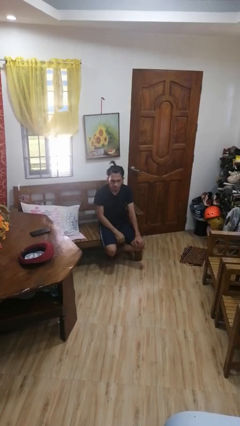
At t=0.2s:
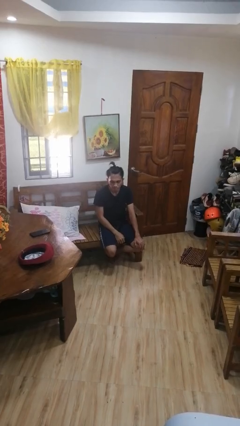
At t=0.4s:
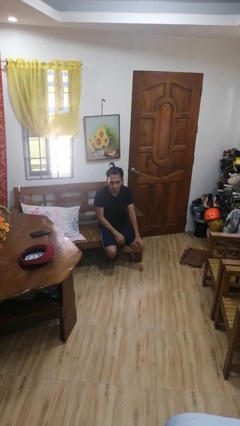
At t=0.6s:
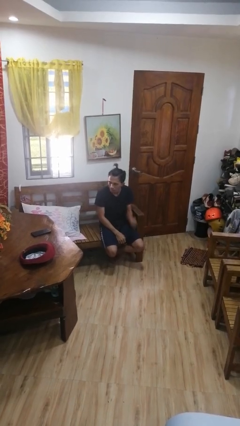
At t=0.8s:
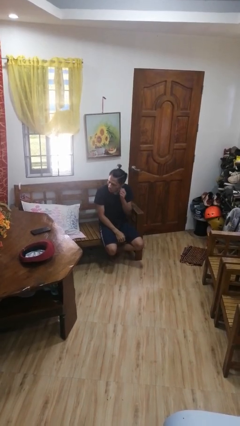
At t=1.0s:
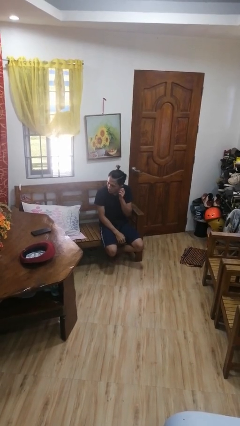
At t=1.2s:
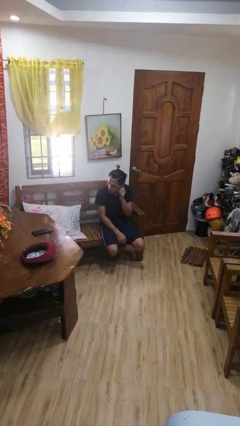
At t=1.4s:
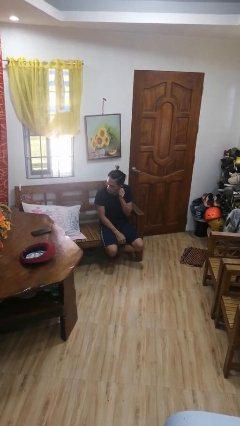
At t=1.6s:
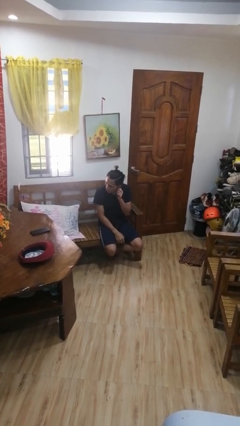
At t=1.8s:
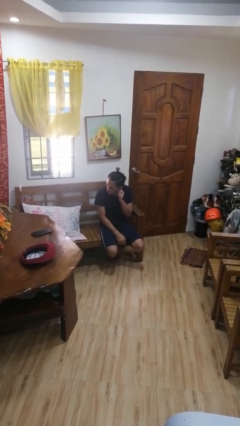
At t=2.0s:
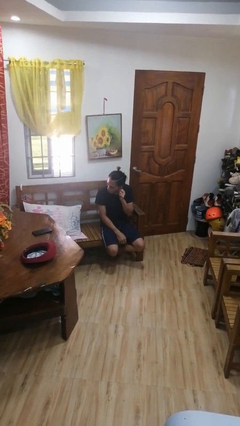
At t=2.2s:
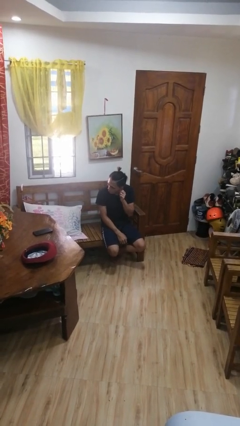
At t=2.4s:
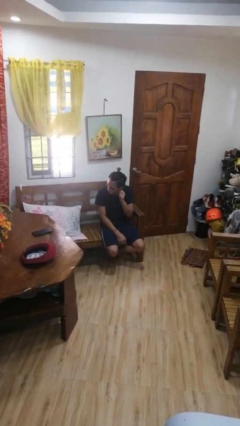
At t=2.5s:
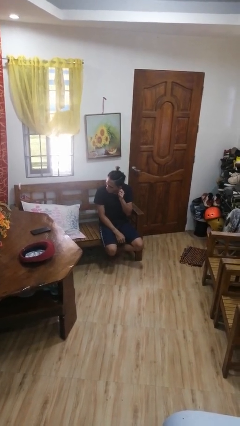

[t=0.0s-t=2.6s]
person touches earlobe

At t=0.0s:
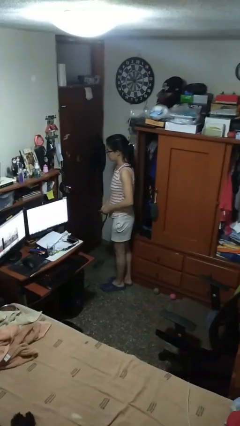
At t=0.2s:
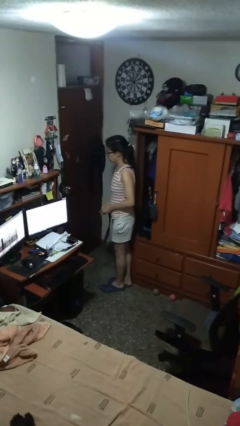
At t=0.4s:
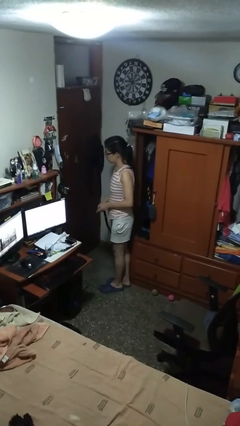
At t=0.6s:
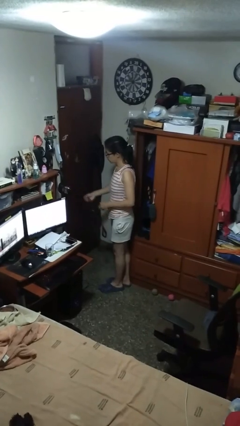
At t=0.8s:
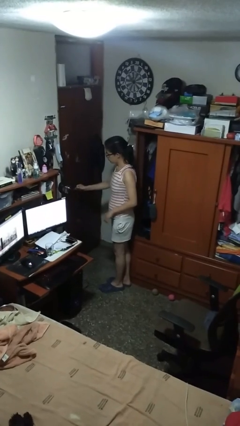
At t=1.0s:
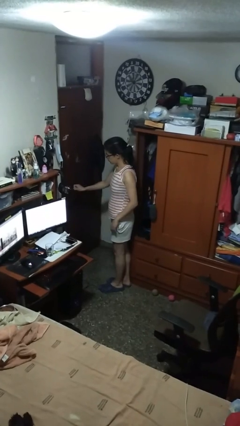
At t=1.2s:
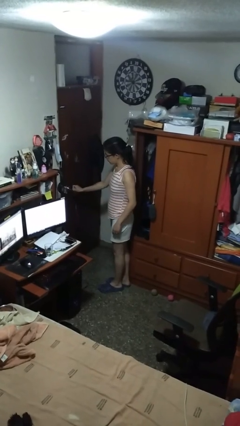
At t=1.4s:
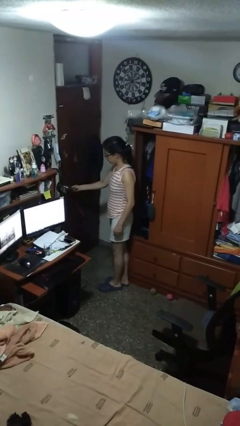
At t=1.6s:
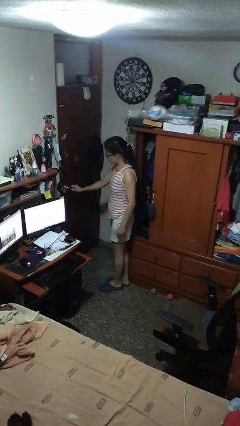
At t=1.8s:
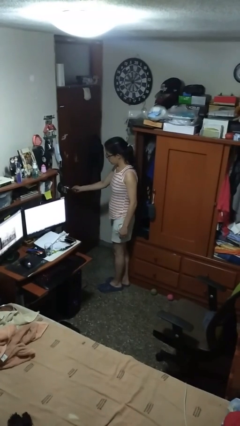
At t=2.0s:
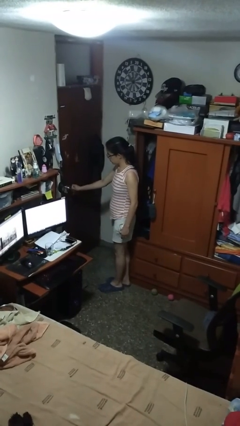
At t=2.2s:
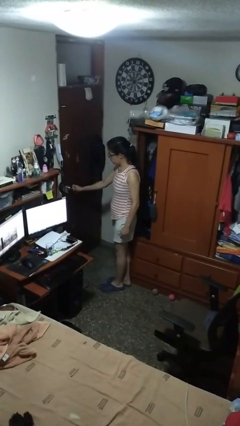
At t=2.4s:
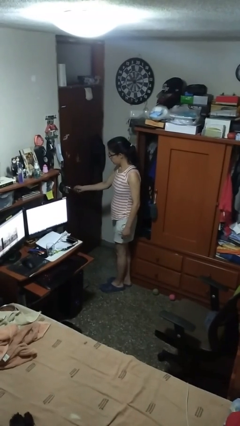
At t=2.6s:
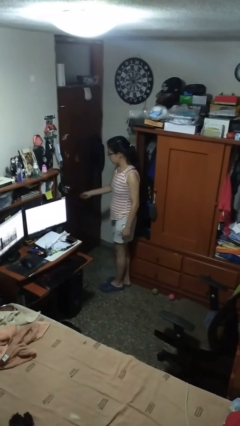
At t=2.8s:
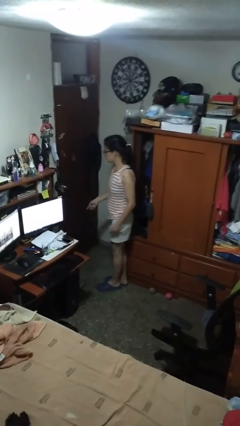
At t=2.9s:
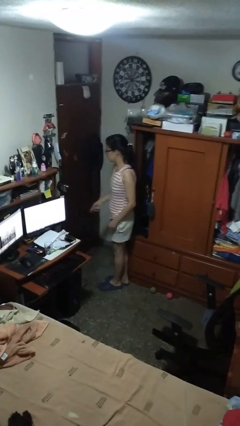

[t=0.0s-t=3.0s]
person locks door with keys

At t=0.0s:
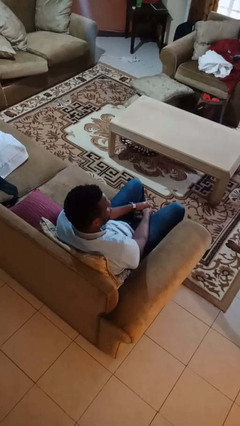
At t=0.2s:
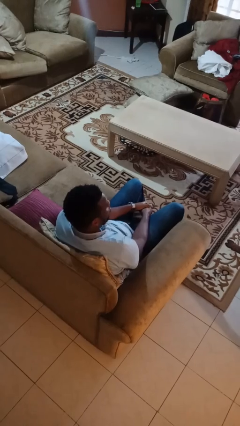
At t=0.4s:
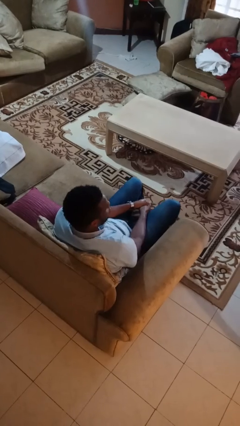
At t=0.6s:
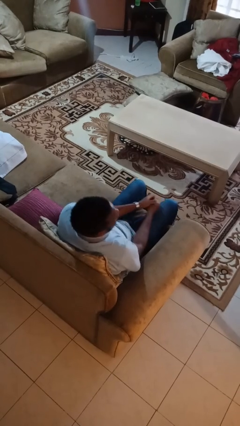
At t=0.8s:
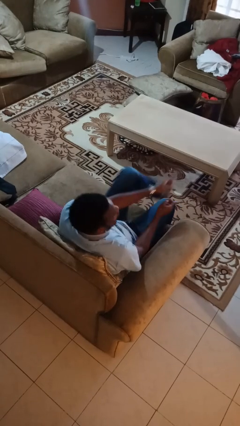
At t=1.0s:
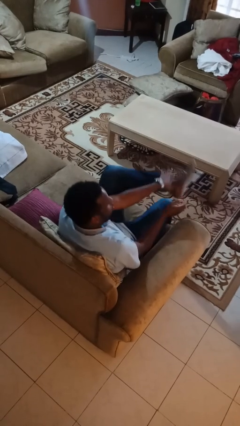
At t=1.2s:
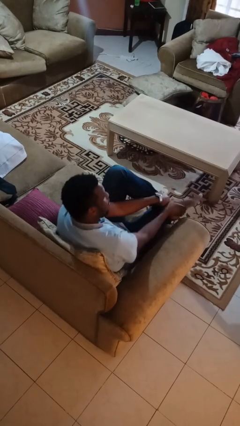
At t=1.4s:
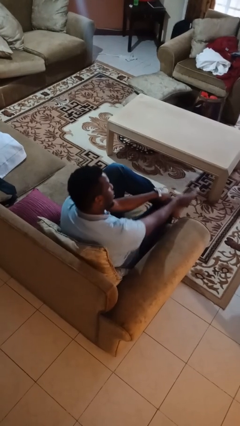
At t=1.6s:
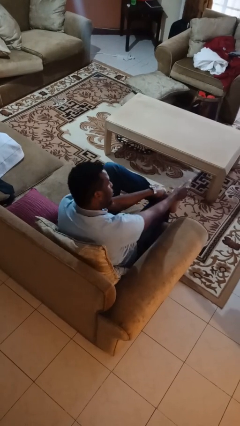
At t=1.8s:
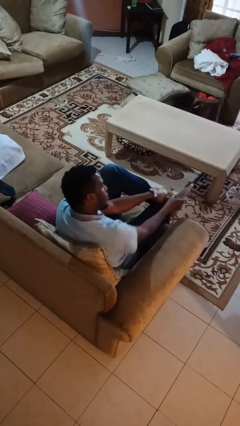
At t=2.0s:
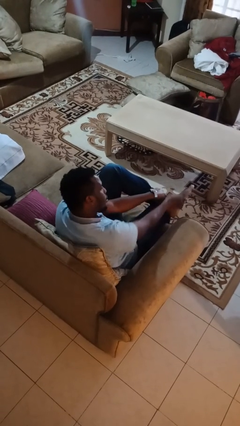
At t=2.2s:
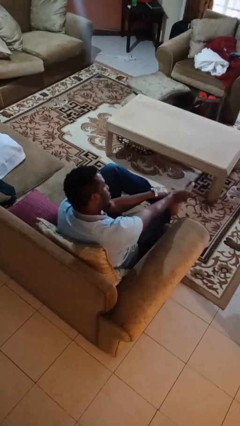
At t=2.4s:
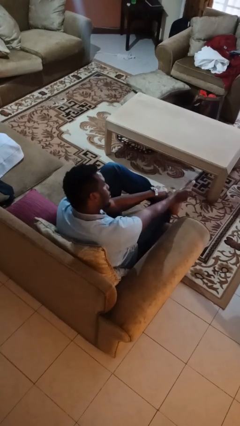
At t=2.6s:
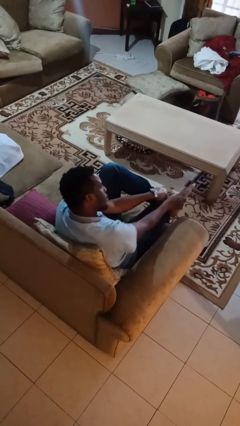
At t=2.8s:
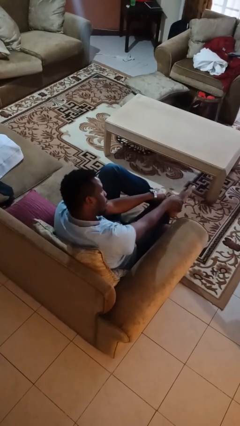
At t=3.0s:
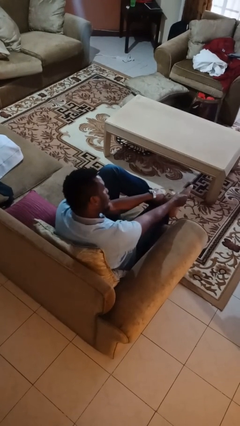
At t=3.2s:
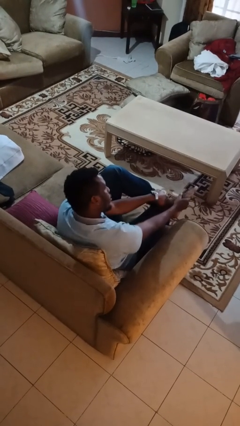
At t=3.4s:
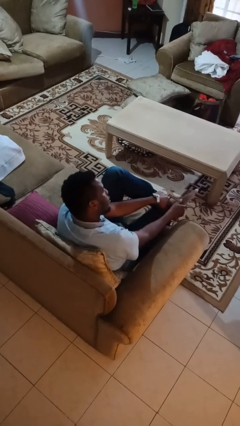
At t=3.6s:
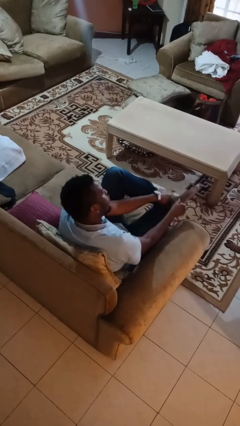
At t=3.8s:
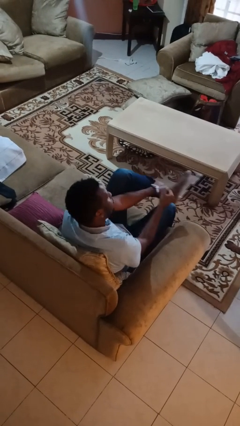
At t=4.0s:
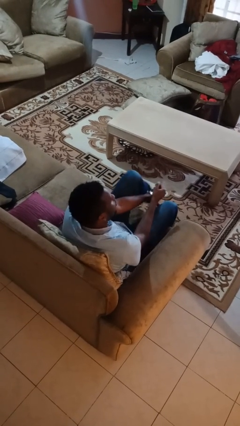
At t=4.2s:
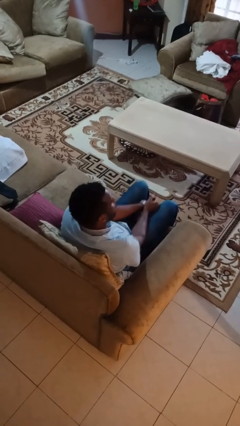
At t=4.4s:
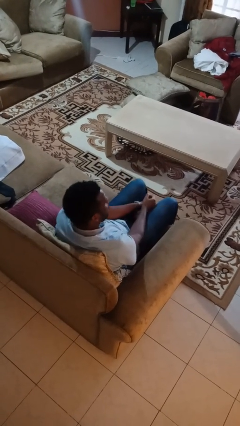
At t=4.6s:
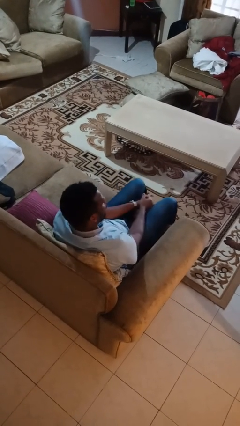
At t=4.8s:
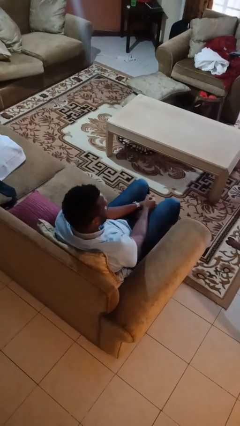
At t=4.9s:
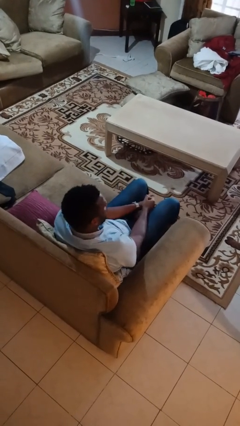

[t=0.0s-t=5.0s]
person rubs foot

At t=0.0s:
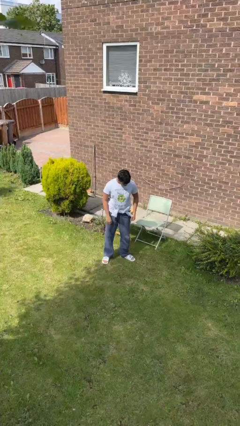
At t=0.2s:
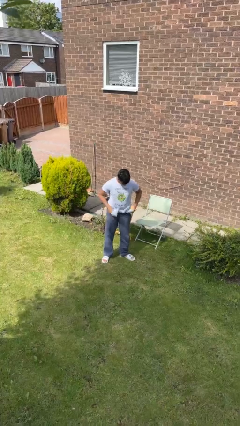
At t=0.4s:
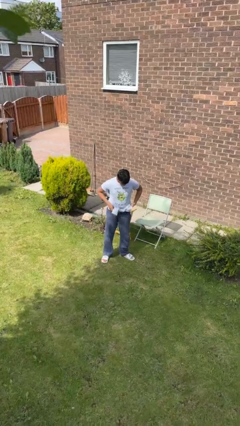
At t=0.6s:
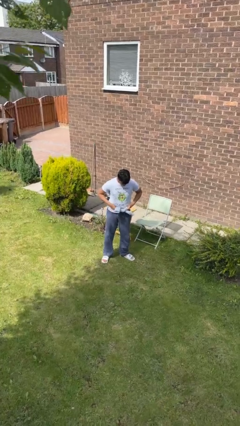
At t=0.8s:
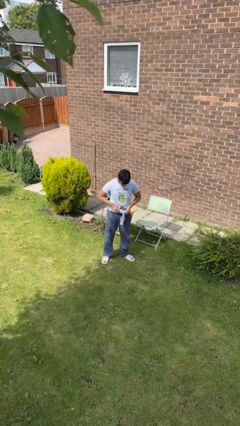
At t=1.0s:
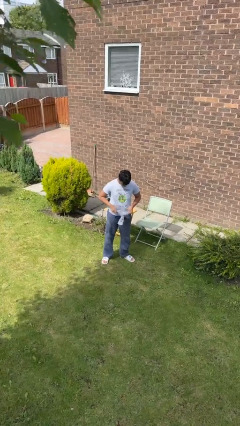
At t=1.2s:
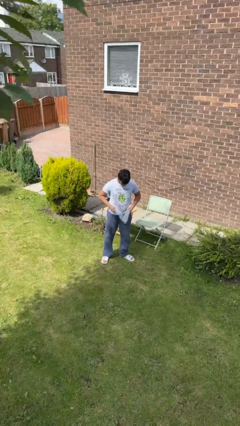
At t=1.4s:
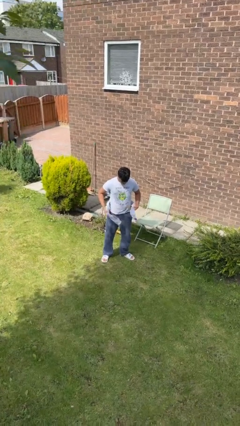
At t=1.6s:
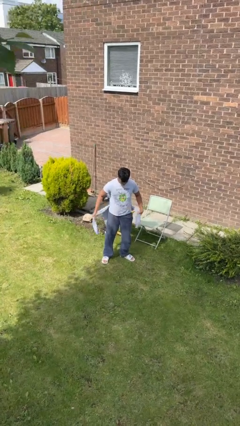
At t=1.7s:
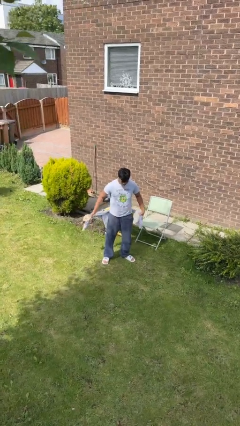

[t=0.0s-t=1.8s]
person unties jacket around waist

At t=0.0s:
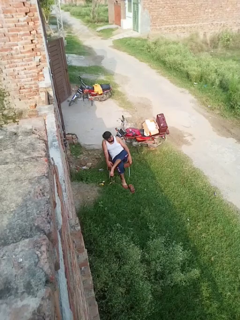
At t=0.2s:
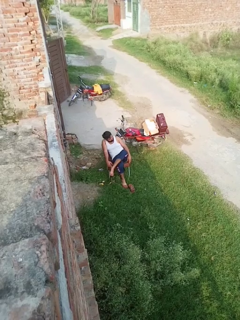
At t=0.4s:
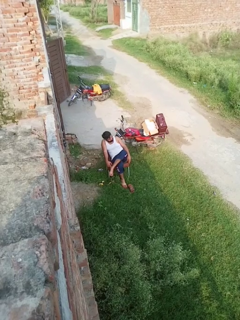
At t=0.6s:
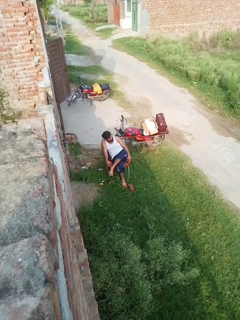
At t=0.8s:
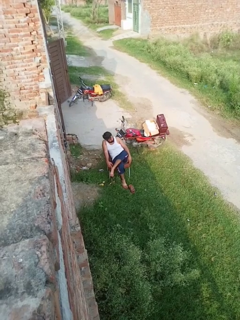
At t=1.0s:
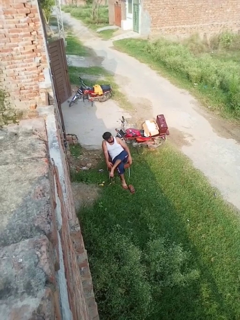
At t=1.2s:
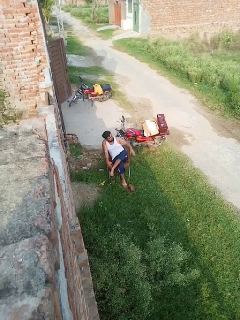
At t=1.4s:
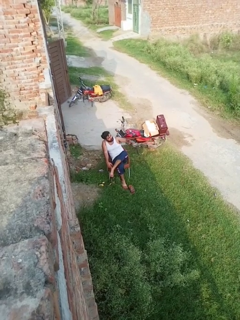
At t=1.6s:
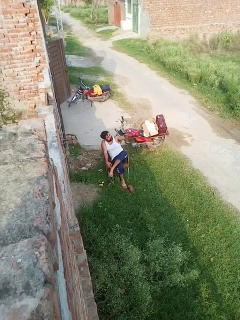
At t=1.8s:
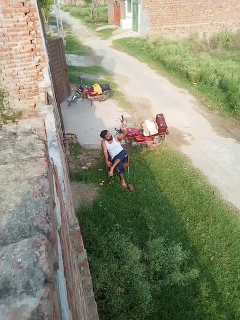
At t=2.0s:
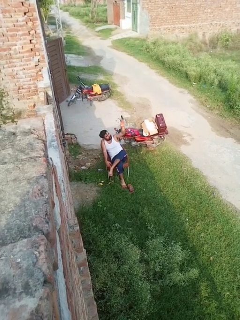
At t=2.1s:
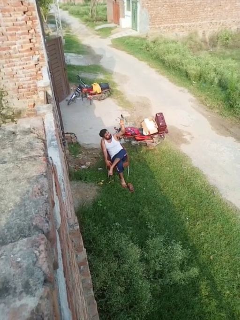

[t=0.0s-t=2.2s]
person gestures swipe up

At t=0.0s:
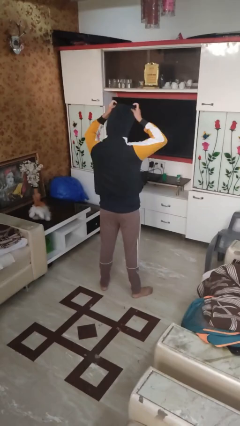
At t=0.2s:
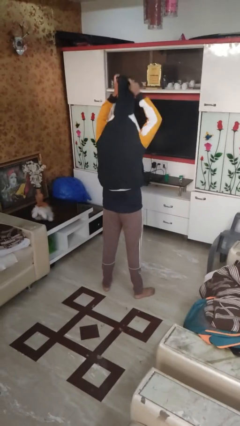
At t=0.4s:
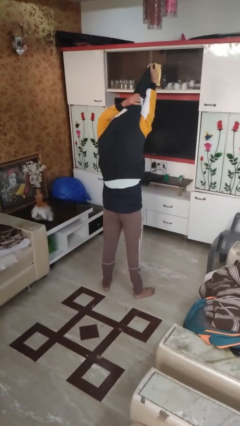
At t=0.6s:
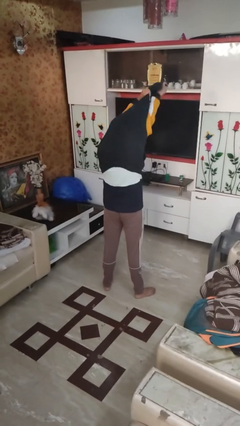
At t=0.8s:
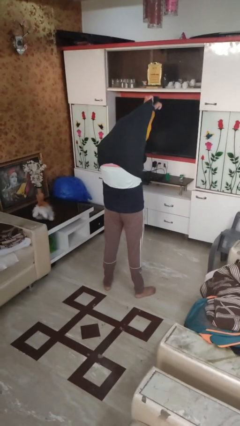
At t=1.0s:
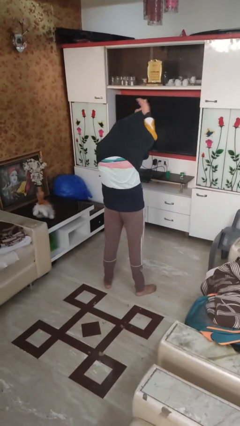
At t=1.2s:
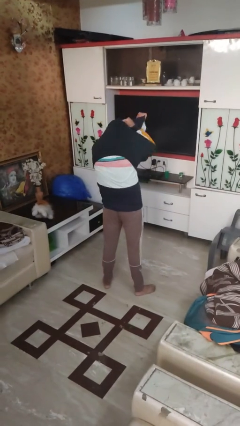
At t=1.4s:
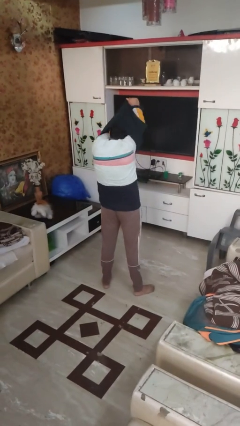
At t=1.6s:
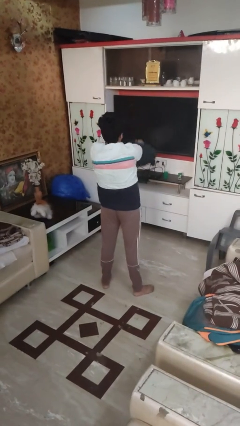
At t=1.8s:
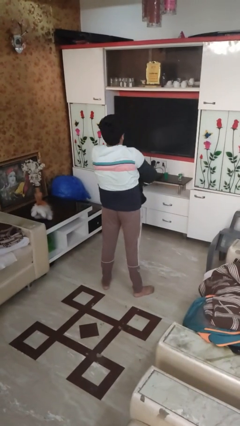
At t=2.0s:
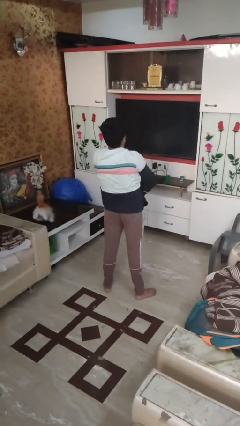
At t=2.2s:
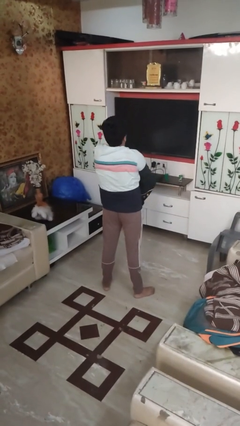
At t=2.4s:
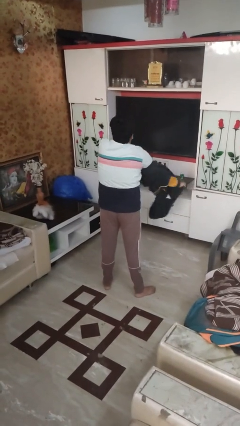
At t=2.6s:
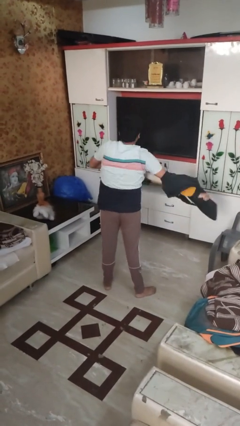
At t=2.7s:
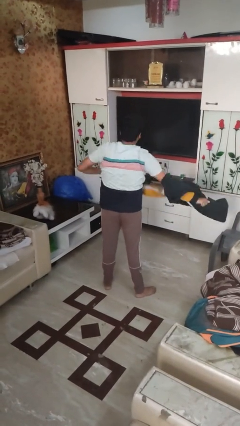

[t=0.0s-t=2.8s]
person takes off hoodie

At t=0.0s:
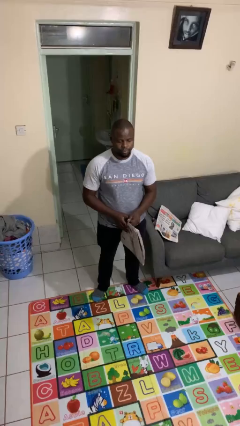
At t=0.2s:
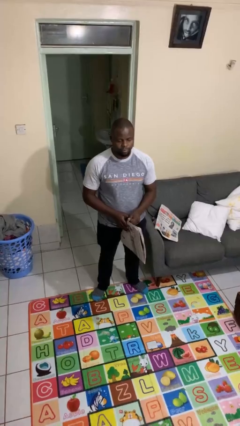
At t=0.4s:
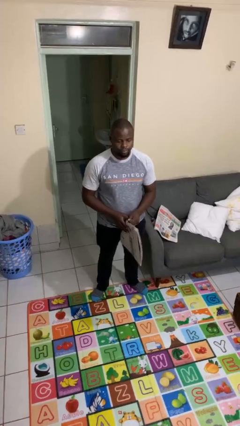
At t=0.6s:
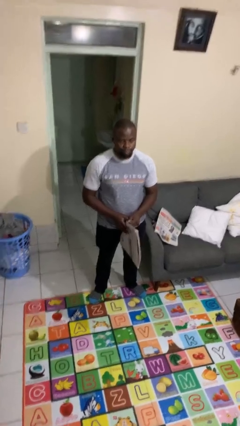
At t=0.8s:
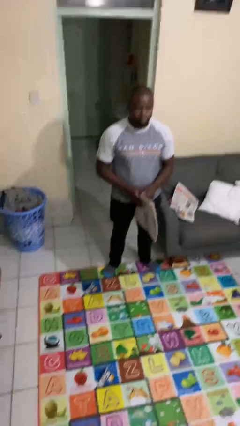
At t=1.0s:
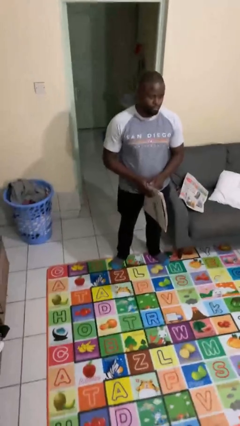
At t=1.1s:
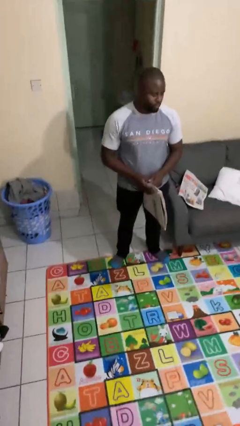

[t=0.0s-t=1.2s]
person reads newspaper
